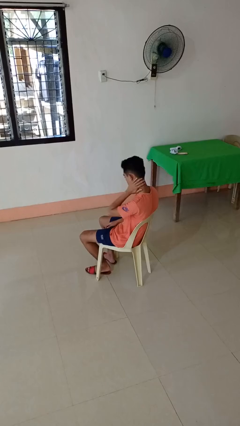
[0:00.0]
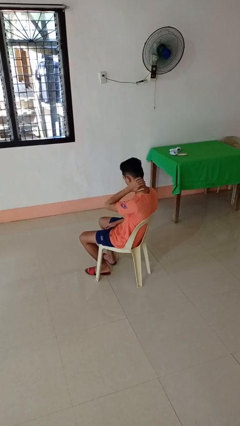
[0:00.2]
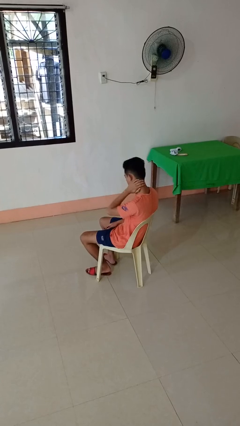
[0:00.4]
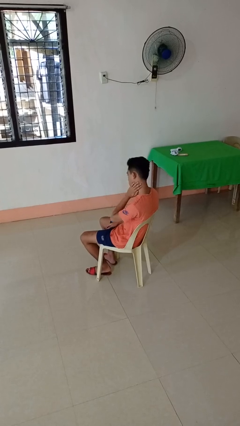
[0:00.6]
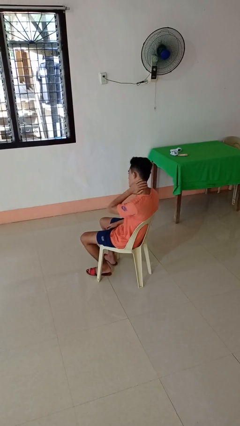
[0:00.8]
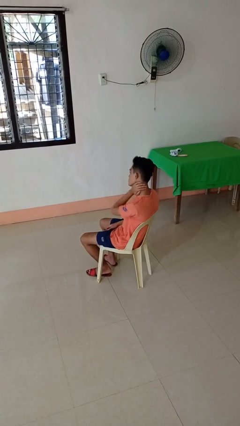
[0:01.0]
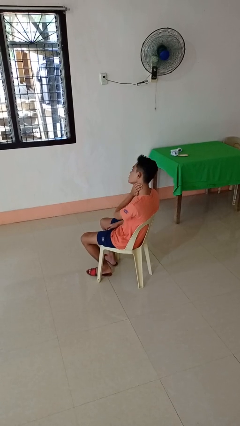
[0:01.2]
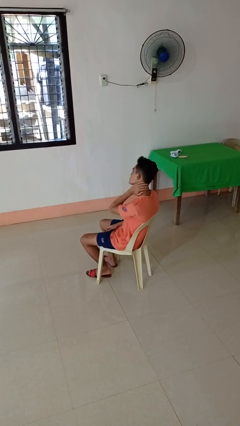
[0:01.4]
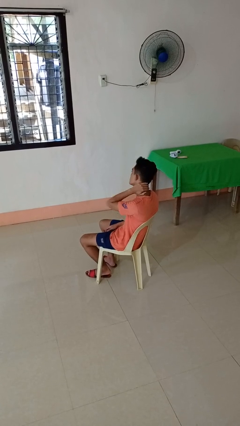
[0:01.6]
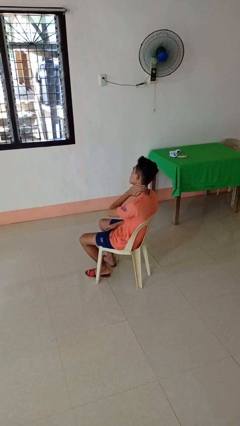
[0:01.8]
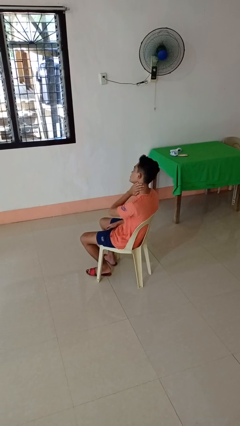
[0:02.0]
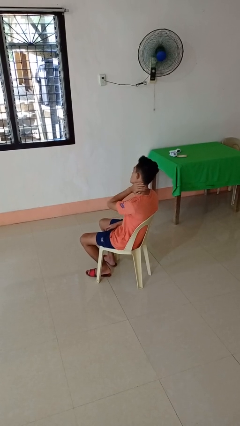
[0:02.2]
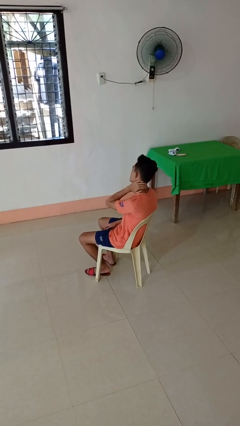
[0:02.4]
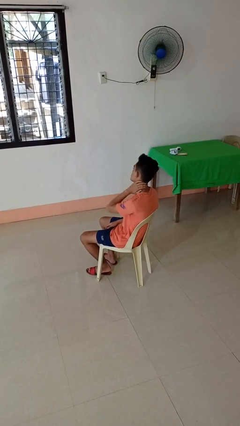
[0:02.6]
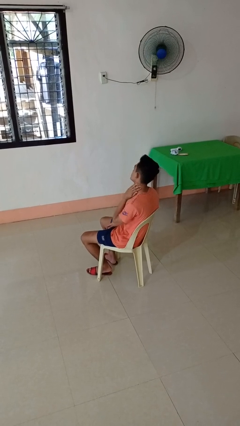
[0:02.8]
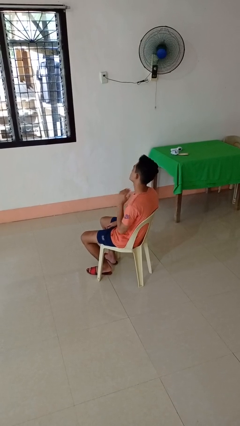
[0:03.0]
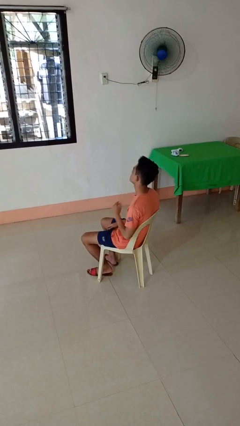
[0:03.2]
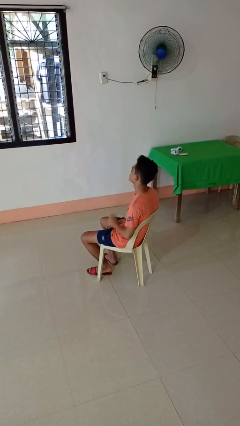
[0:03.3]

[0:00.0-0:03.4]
person rubs neck

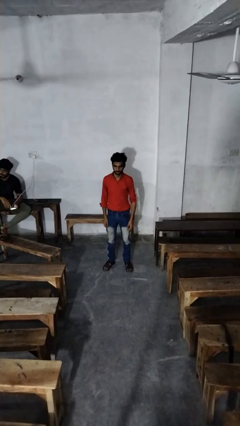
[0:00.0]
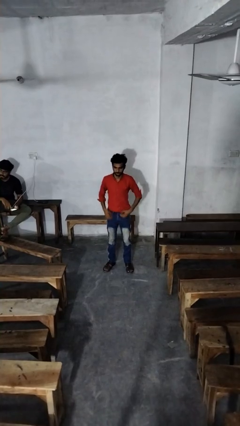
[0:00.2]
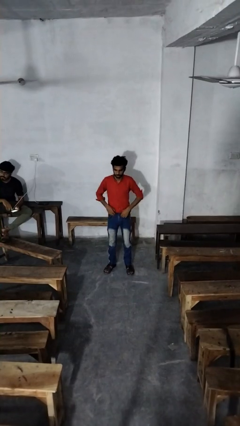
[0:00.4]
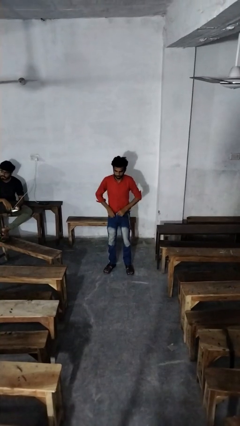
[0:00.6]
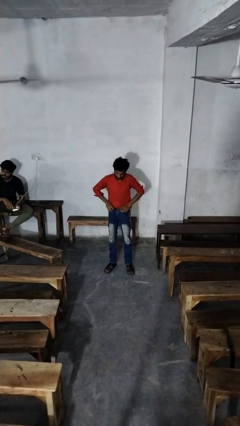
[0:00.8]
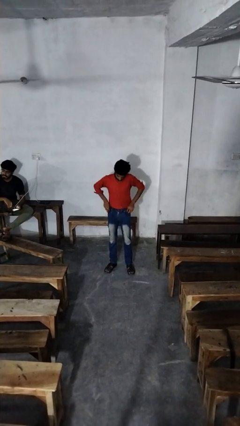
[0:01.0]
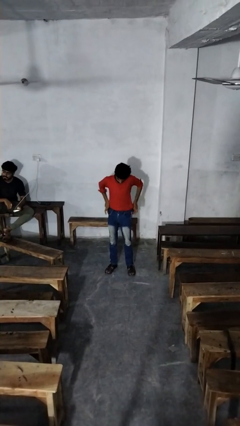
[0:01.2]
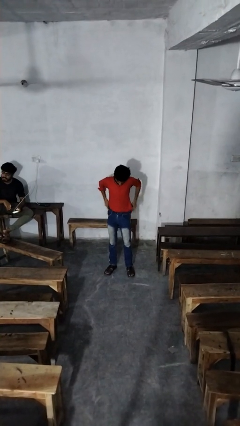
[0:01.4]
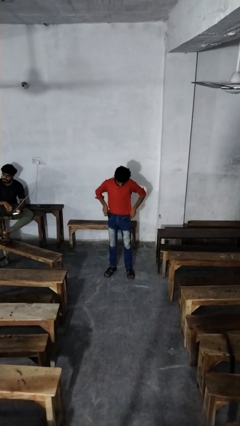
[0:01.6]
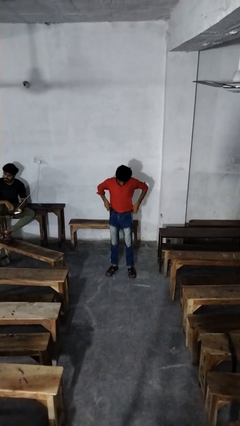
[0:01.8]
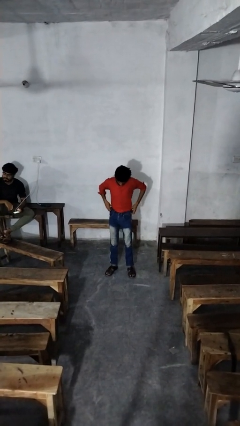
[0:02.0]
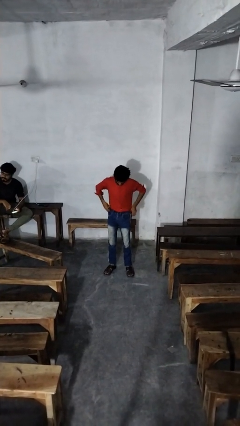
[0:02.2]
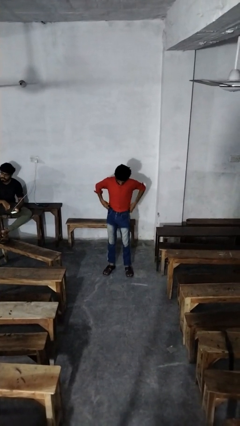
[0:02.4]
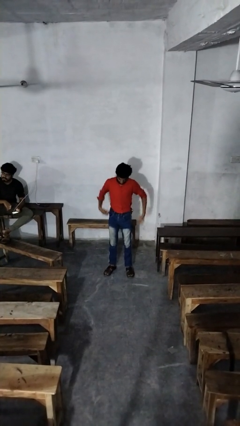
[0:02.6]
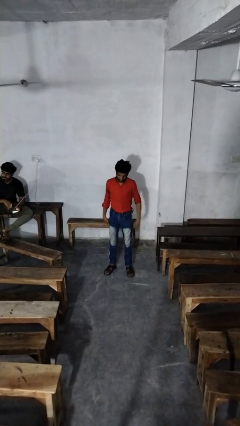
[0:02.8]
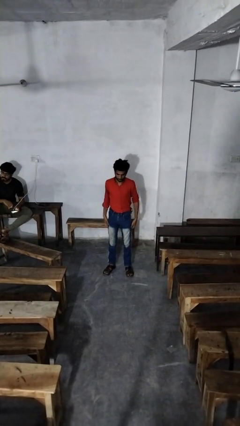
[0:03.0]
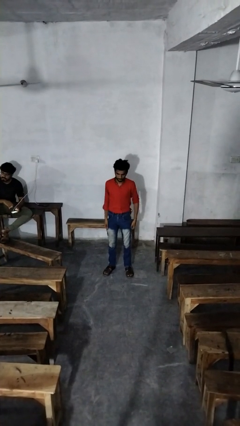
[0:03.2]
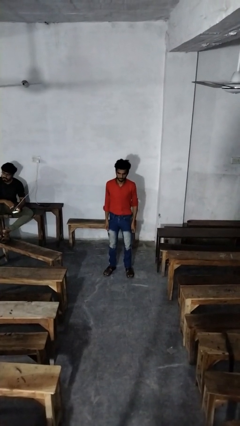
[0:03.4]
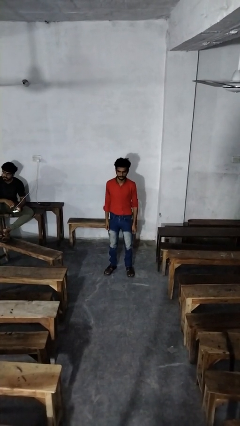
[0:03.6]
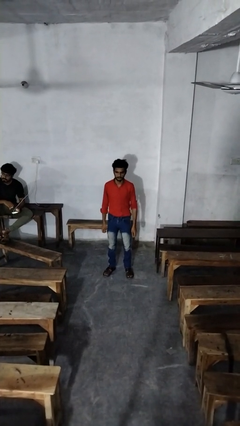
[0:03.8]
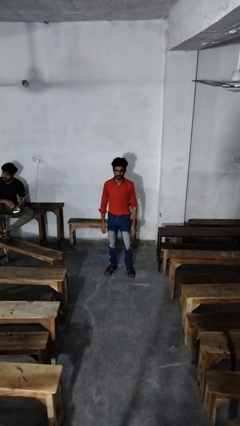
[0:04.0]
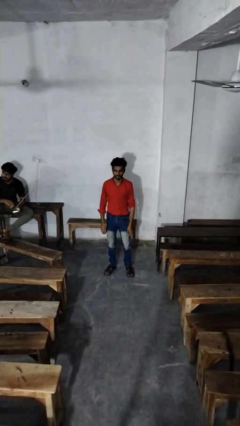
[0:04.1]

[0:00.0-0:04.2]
person hikes up pants

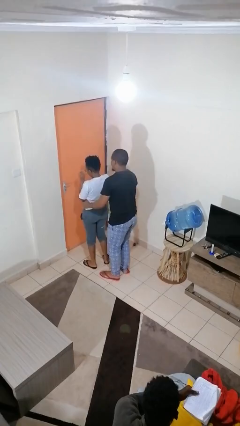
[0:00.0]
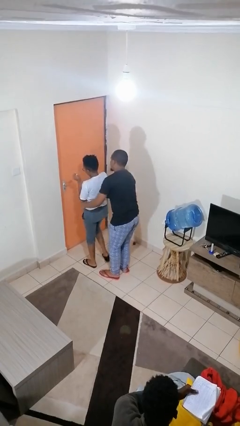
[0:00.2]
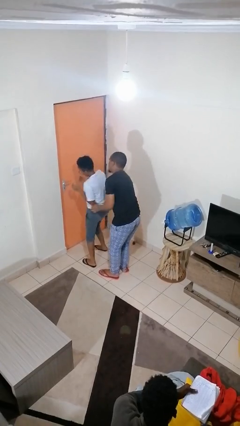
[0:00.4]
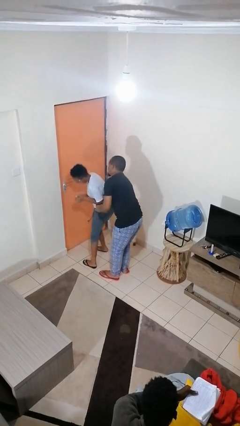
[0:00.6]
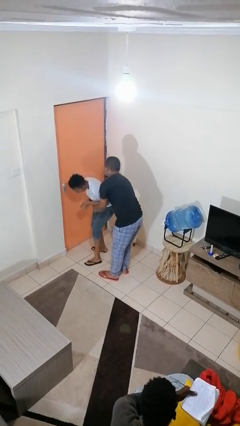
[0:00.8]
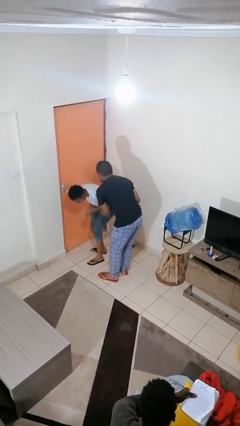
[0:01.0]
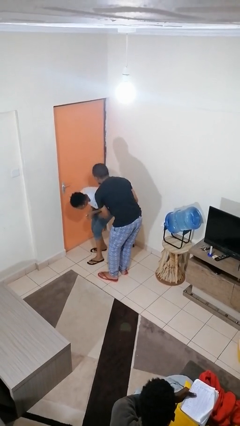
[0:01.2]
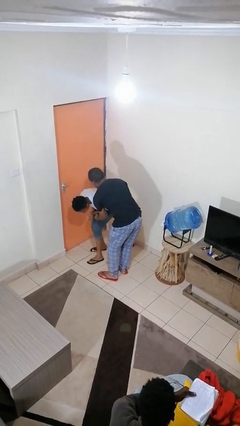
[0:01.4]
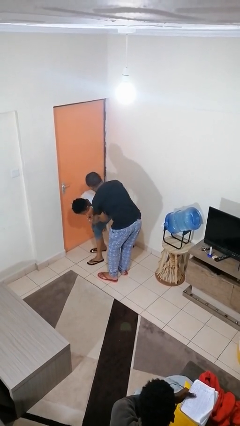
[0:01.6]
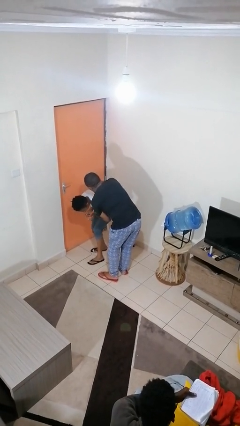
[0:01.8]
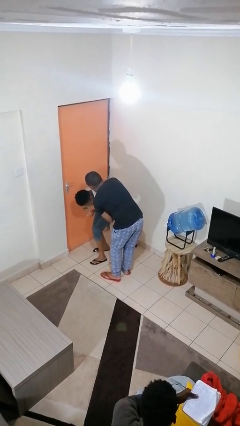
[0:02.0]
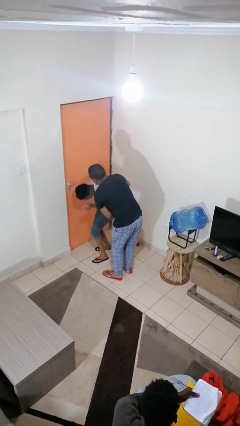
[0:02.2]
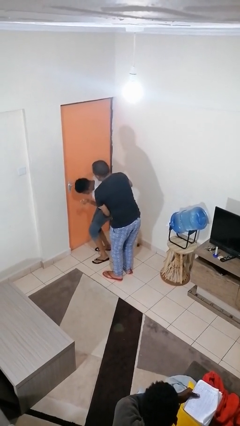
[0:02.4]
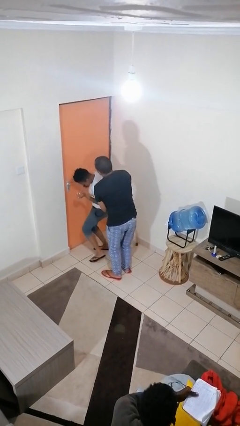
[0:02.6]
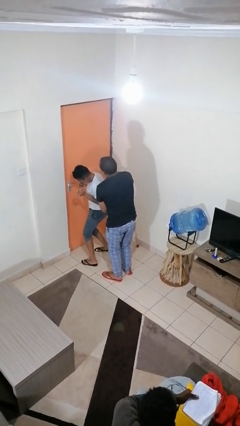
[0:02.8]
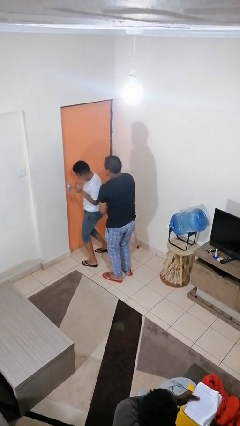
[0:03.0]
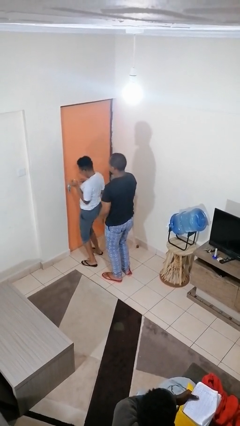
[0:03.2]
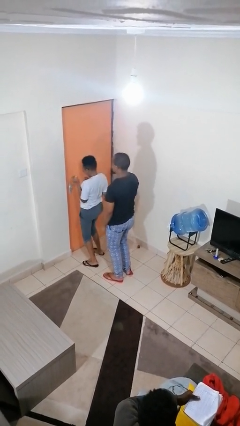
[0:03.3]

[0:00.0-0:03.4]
person tickles person

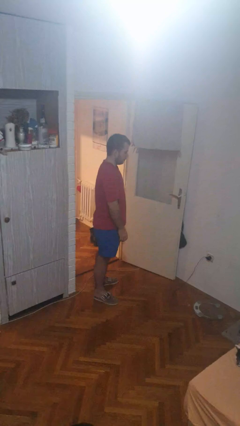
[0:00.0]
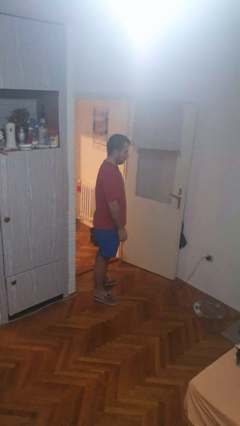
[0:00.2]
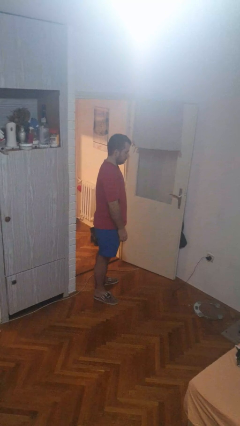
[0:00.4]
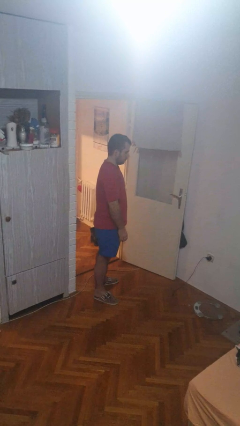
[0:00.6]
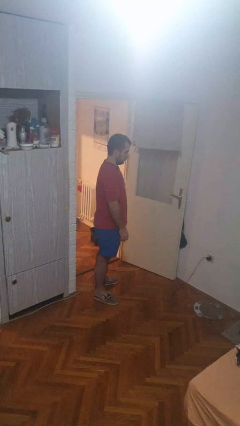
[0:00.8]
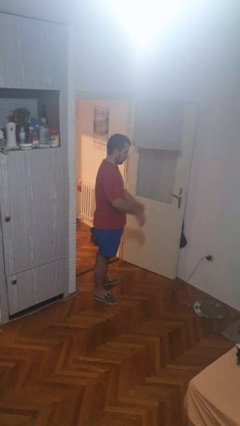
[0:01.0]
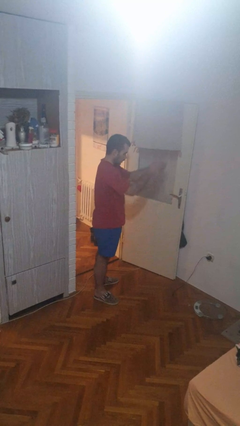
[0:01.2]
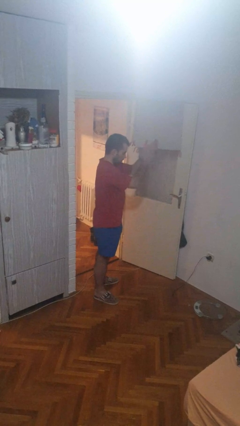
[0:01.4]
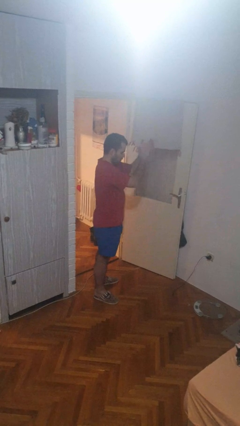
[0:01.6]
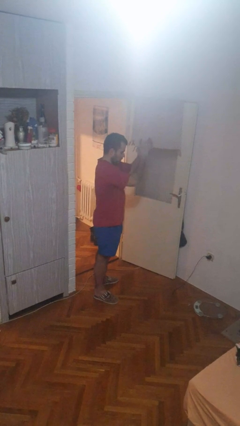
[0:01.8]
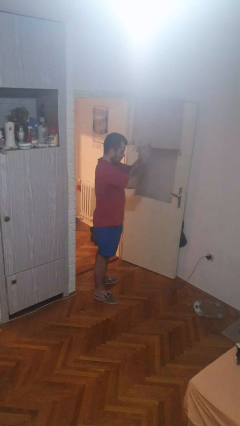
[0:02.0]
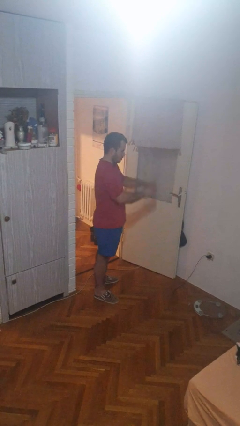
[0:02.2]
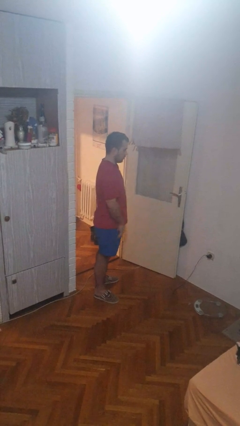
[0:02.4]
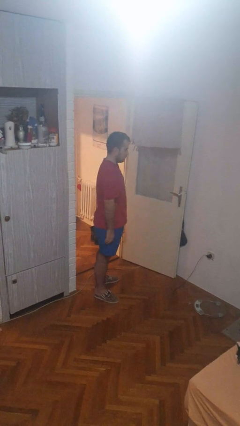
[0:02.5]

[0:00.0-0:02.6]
person claps hands

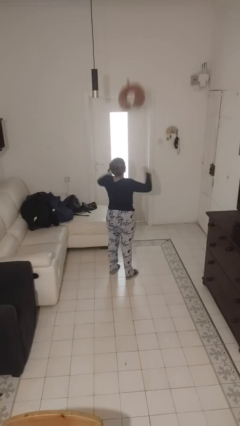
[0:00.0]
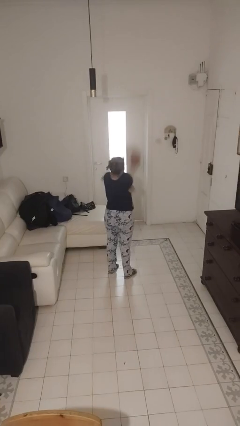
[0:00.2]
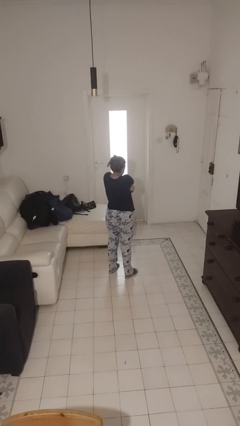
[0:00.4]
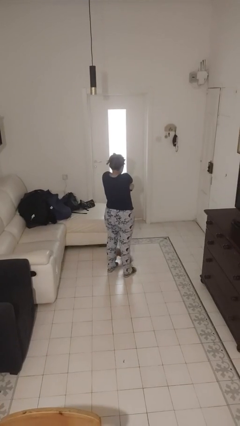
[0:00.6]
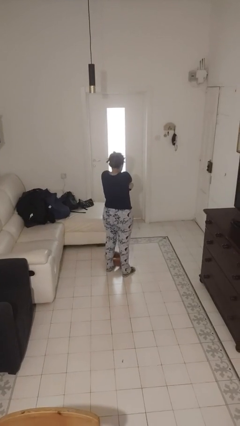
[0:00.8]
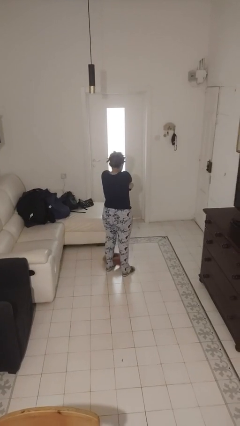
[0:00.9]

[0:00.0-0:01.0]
person catches dropped object

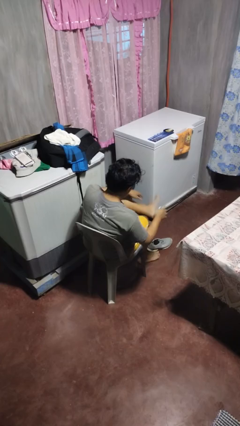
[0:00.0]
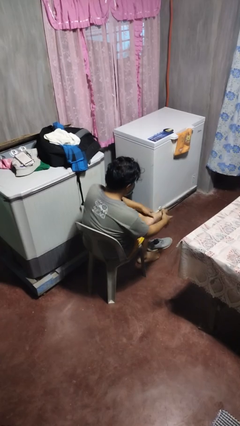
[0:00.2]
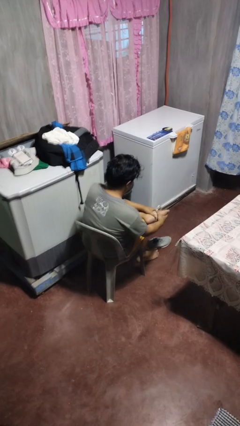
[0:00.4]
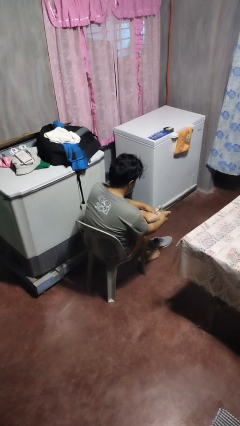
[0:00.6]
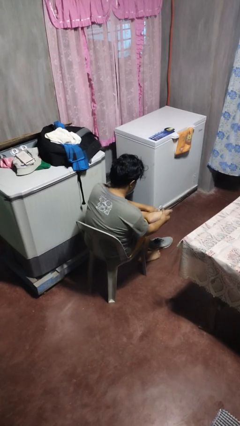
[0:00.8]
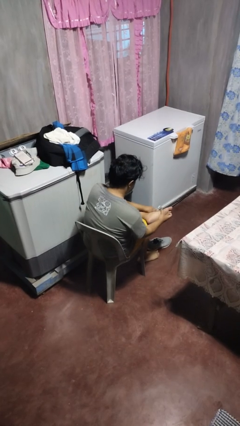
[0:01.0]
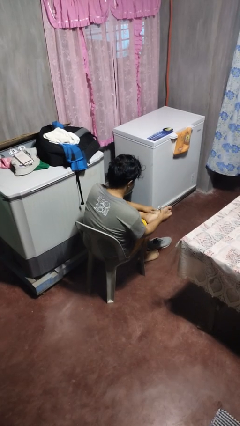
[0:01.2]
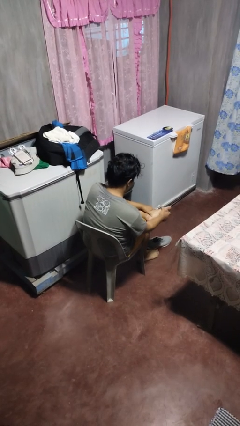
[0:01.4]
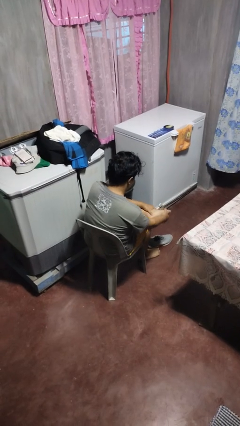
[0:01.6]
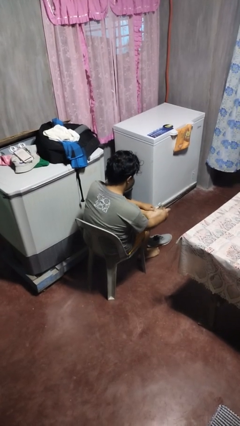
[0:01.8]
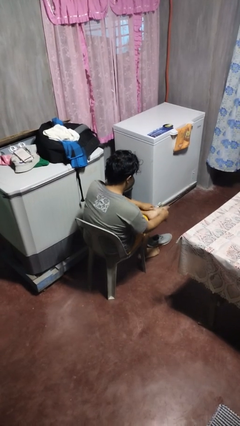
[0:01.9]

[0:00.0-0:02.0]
person rubs foot

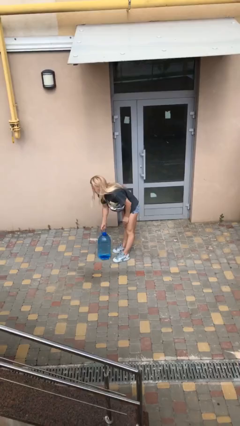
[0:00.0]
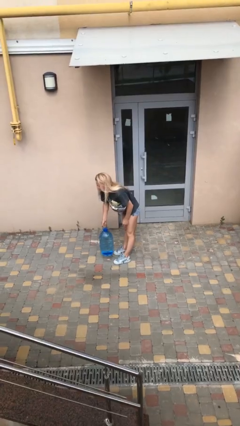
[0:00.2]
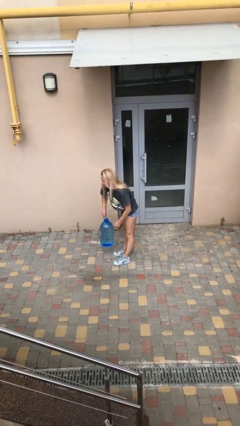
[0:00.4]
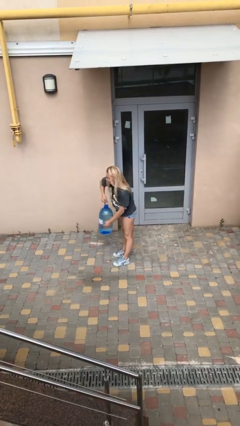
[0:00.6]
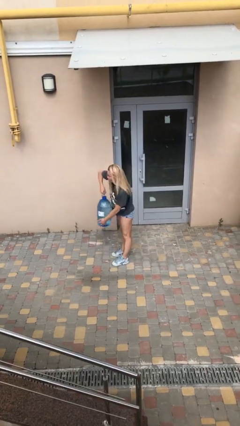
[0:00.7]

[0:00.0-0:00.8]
person picks up object from floor
